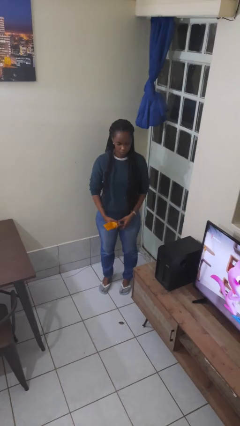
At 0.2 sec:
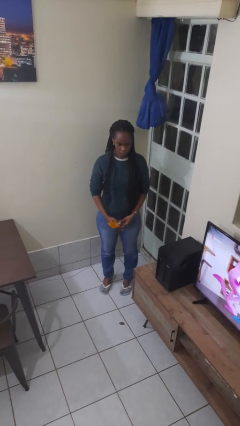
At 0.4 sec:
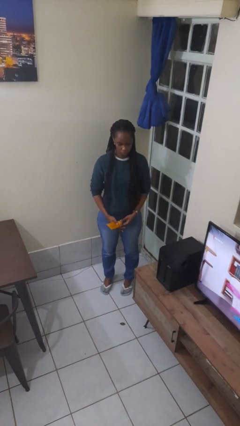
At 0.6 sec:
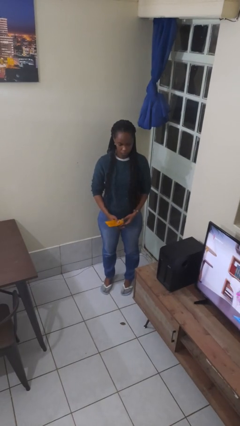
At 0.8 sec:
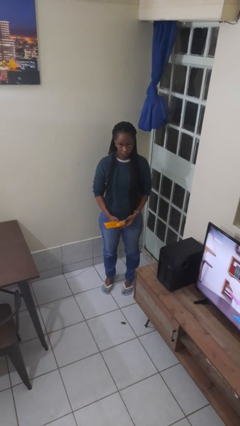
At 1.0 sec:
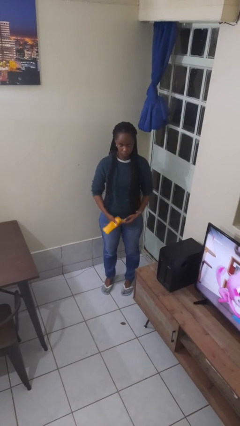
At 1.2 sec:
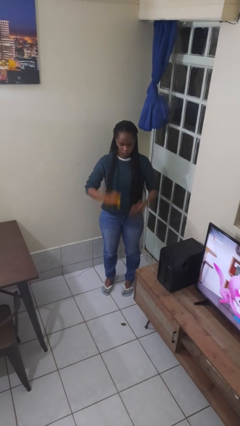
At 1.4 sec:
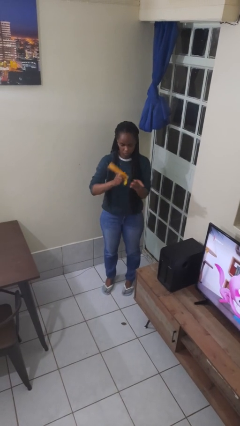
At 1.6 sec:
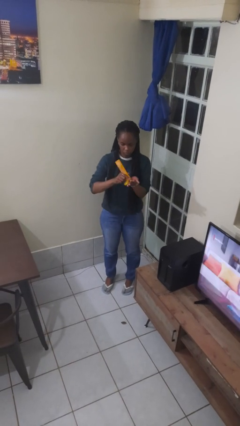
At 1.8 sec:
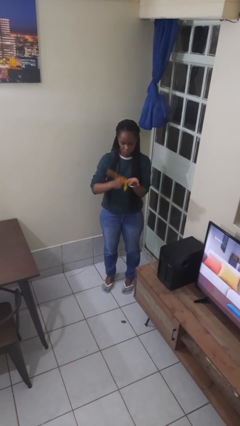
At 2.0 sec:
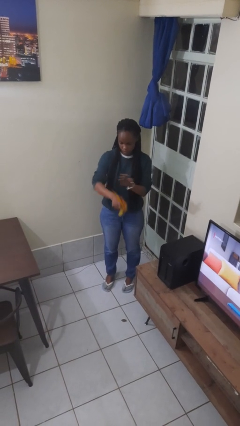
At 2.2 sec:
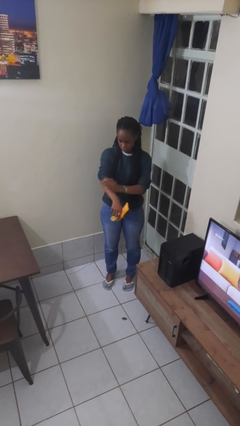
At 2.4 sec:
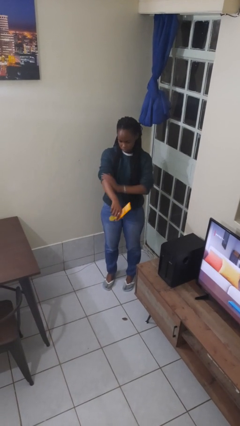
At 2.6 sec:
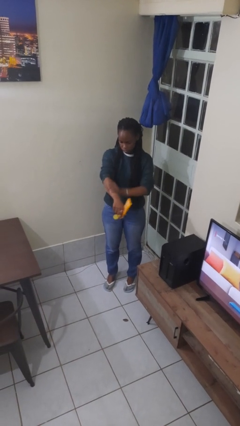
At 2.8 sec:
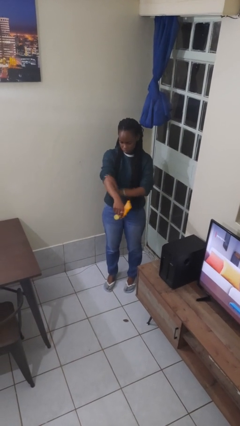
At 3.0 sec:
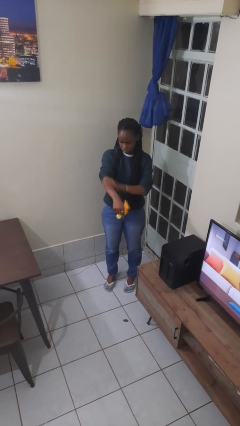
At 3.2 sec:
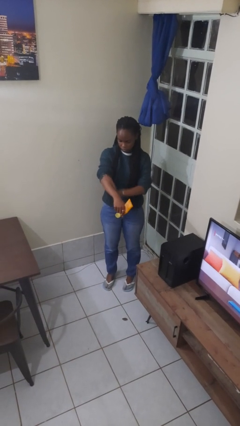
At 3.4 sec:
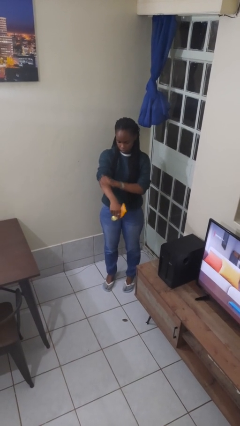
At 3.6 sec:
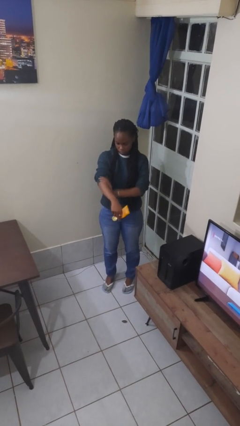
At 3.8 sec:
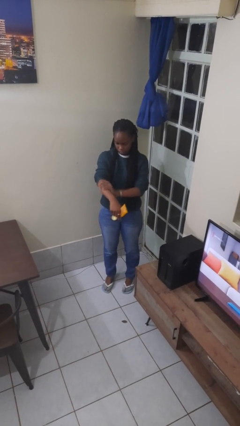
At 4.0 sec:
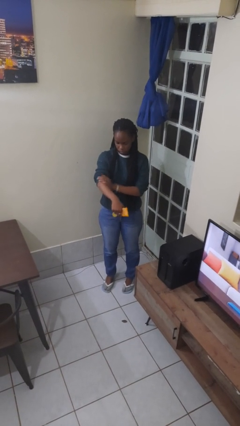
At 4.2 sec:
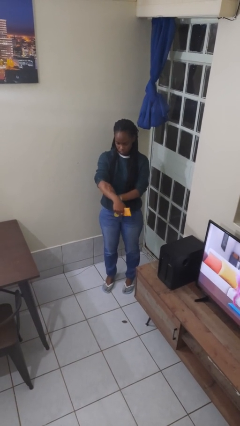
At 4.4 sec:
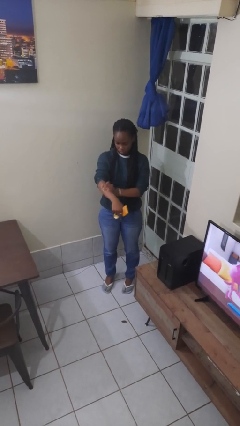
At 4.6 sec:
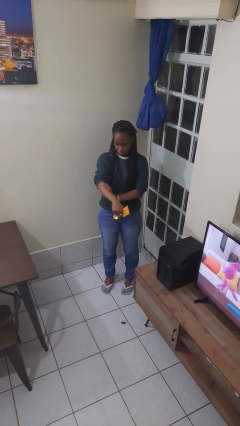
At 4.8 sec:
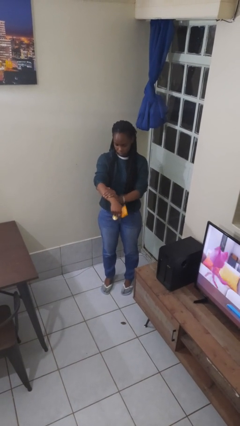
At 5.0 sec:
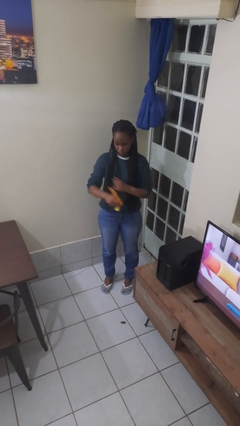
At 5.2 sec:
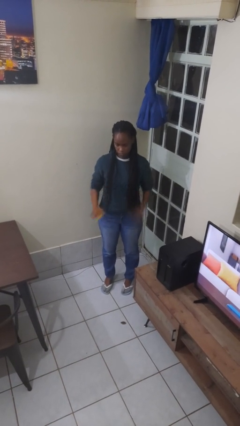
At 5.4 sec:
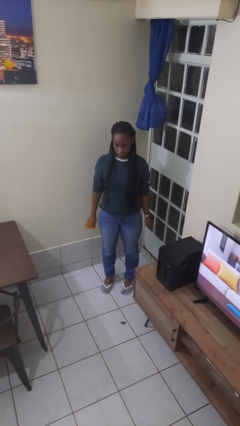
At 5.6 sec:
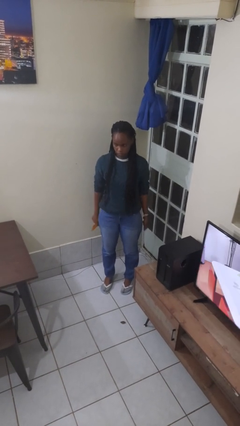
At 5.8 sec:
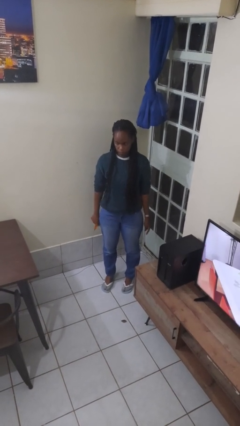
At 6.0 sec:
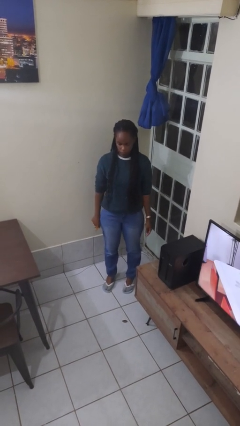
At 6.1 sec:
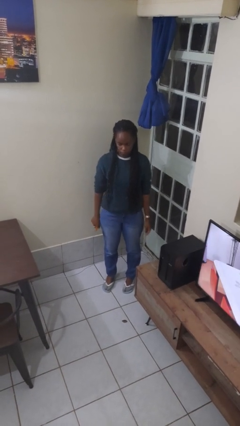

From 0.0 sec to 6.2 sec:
person applies sunscreen

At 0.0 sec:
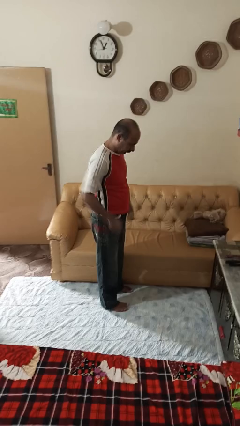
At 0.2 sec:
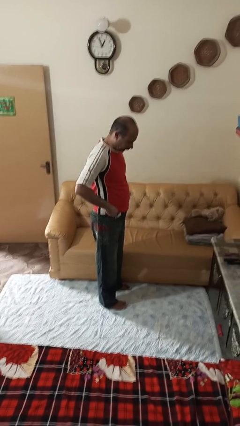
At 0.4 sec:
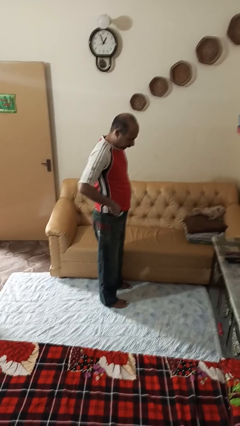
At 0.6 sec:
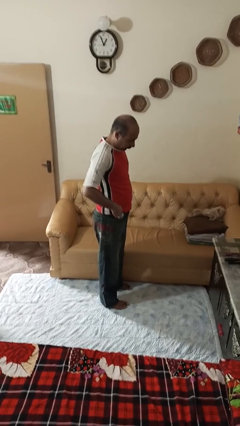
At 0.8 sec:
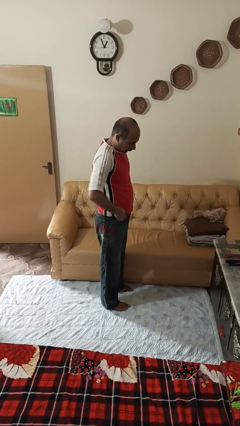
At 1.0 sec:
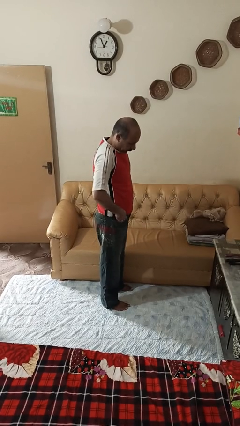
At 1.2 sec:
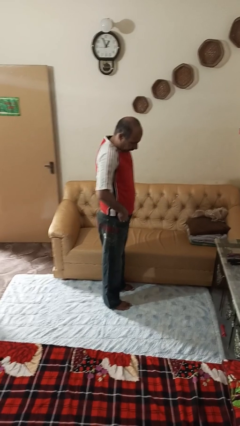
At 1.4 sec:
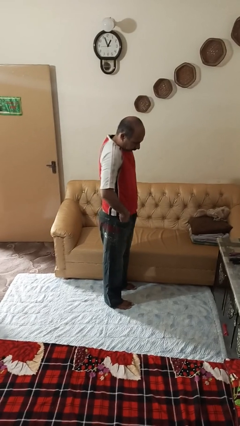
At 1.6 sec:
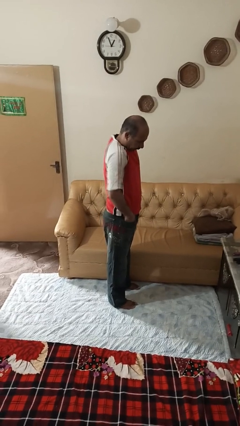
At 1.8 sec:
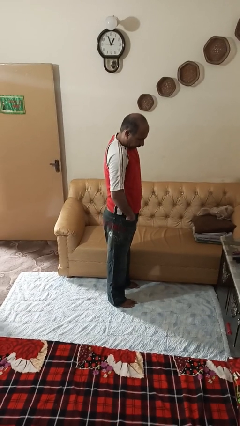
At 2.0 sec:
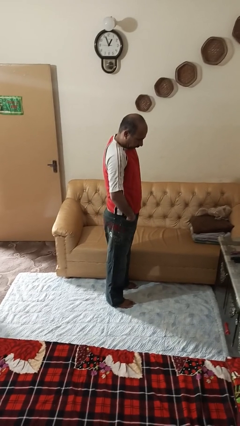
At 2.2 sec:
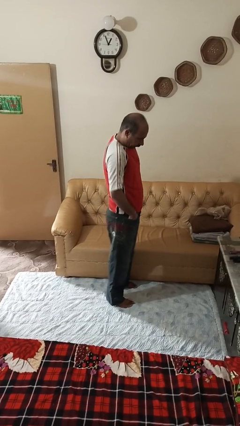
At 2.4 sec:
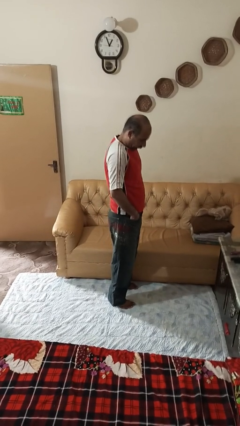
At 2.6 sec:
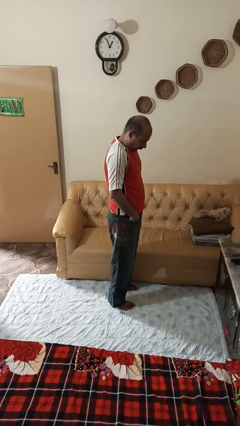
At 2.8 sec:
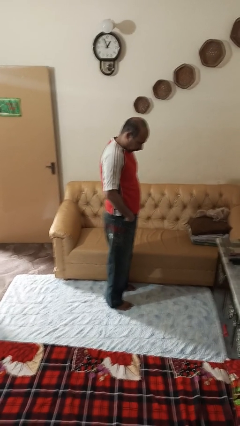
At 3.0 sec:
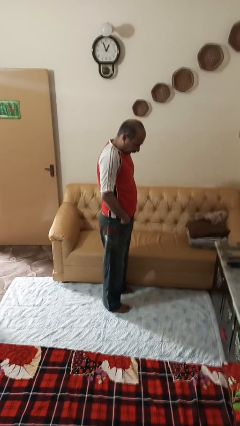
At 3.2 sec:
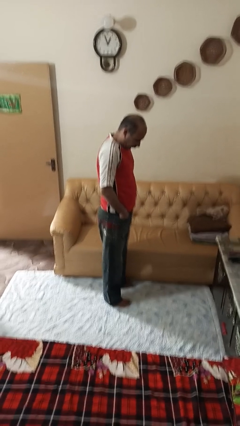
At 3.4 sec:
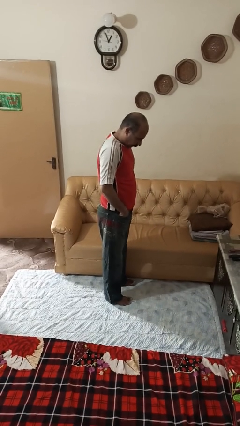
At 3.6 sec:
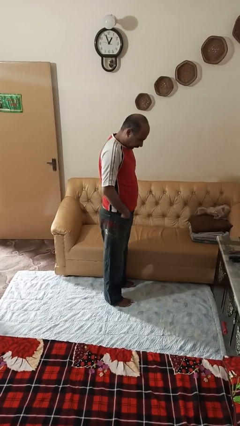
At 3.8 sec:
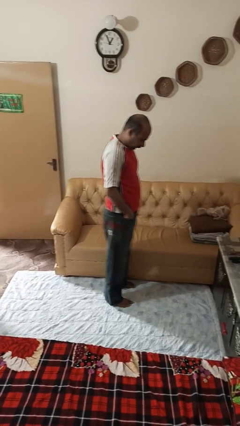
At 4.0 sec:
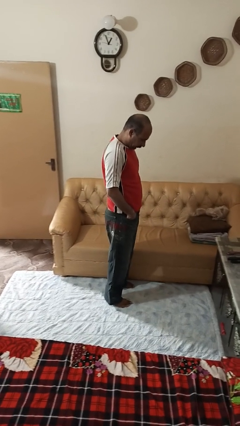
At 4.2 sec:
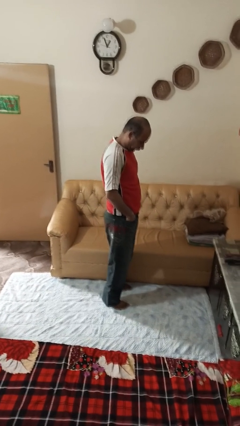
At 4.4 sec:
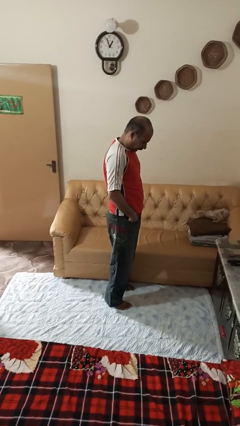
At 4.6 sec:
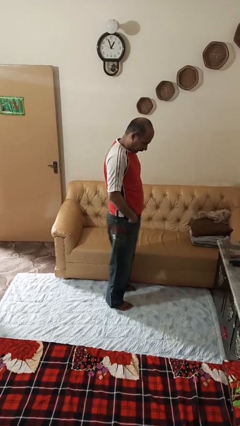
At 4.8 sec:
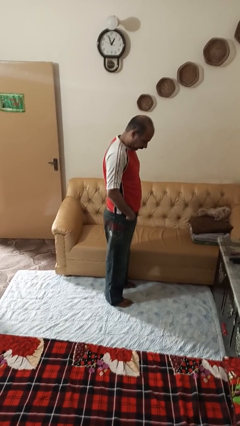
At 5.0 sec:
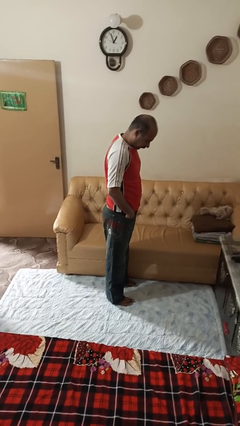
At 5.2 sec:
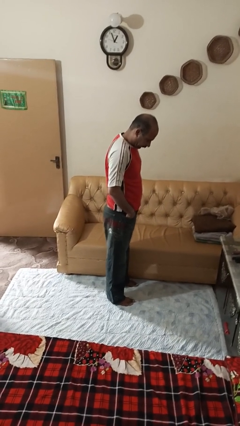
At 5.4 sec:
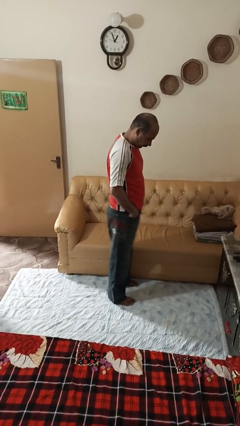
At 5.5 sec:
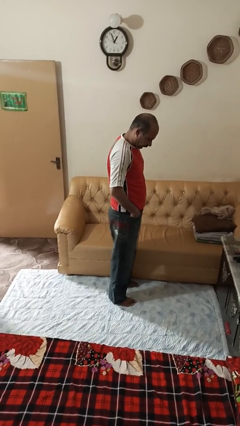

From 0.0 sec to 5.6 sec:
person puts hands in back pockets

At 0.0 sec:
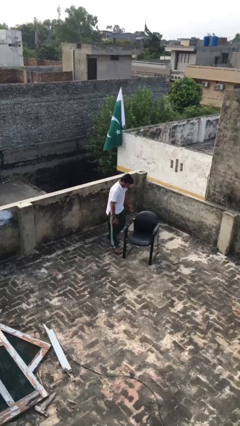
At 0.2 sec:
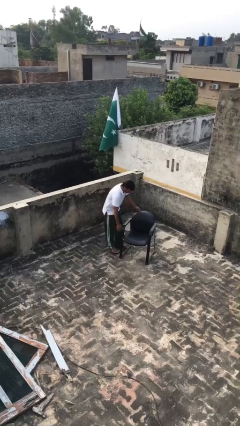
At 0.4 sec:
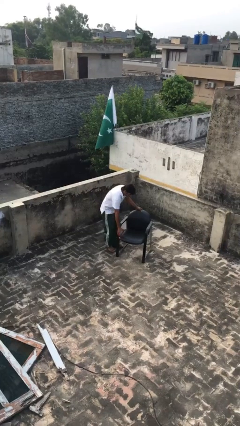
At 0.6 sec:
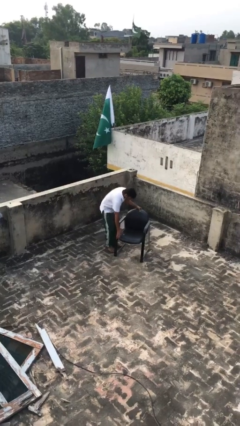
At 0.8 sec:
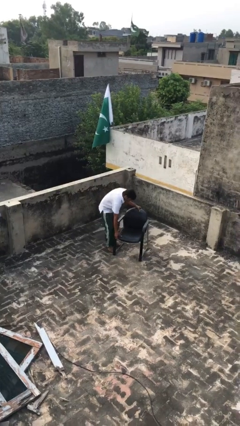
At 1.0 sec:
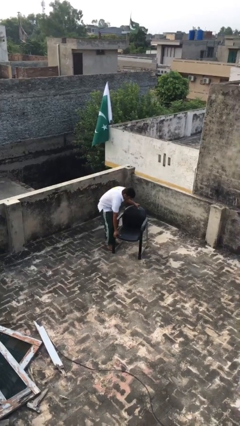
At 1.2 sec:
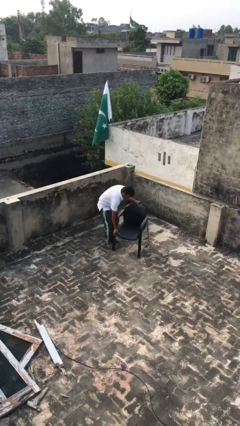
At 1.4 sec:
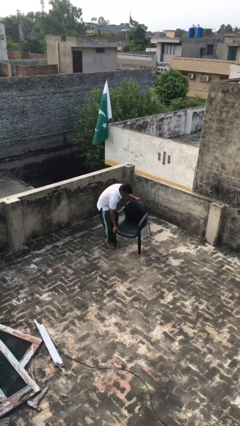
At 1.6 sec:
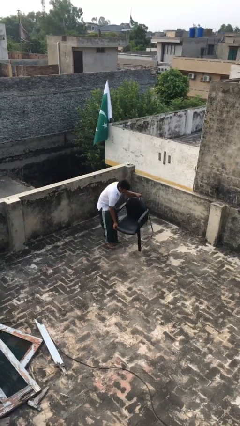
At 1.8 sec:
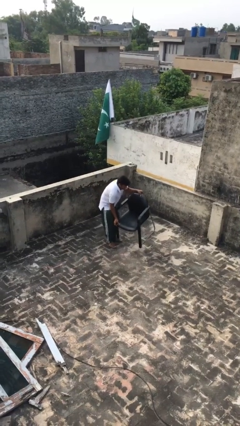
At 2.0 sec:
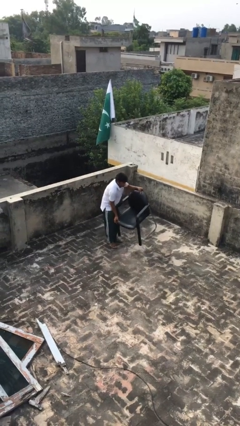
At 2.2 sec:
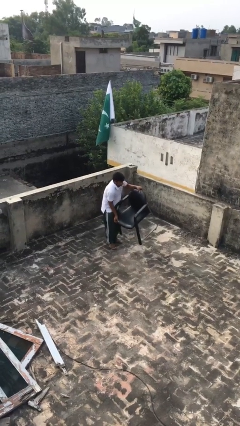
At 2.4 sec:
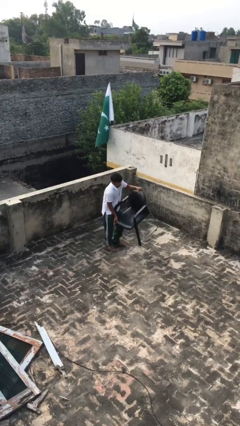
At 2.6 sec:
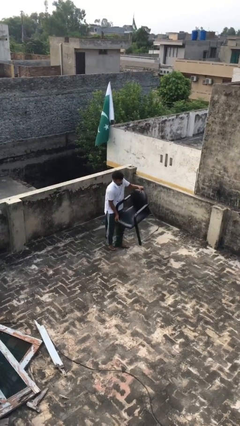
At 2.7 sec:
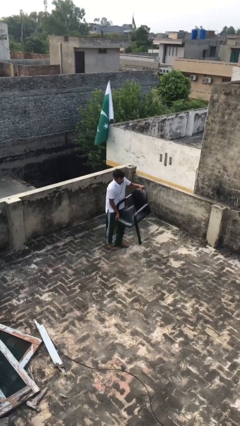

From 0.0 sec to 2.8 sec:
person picks up object from floor

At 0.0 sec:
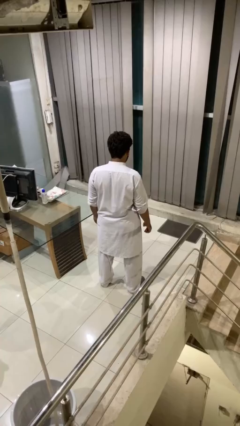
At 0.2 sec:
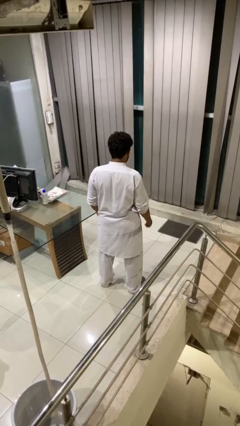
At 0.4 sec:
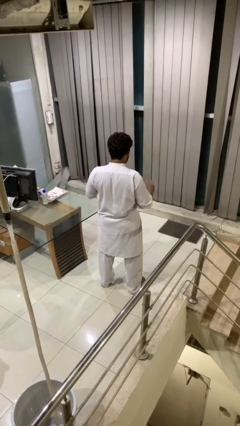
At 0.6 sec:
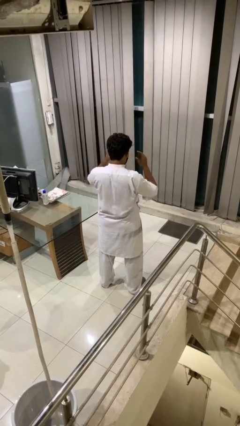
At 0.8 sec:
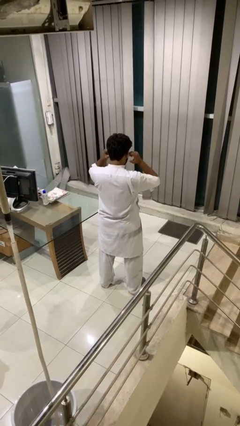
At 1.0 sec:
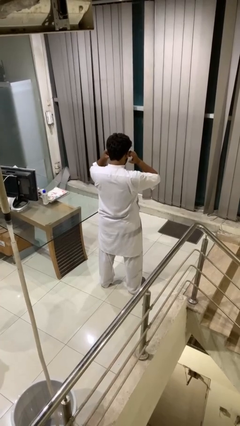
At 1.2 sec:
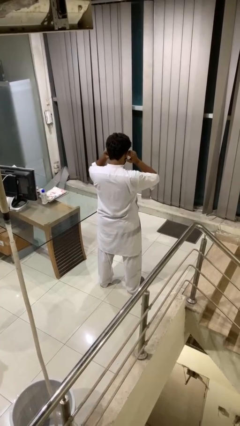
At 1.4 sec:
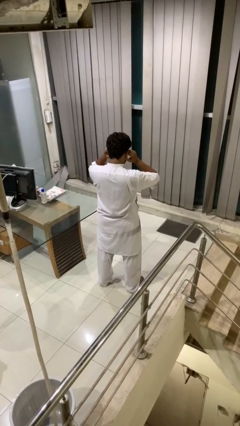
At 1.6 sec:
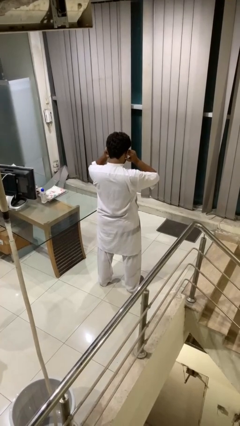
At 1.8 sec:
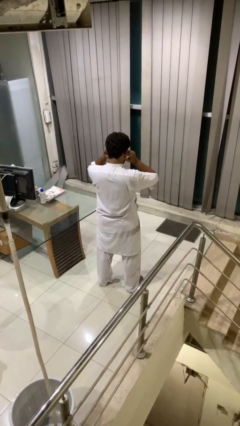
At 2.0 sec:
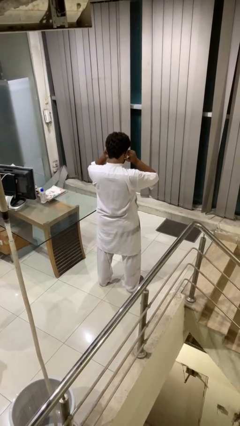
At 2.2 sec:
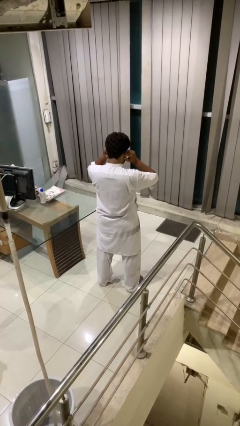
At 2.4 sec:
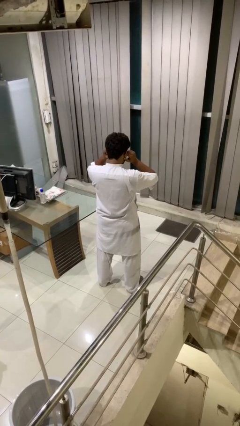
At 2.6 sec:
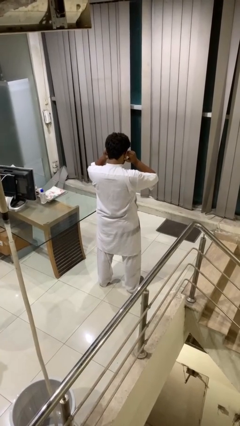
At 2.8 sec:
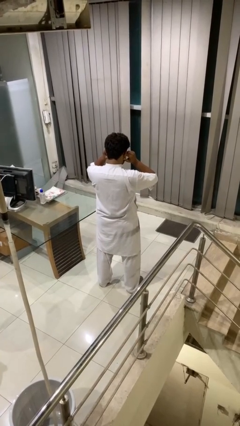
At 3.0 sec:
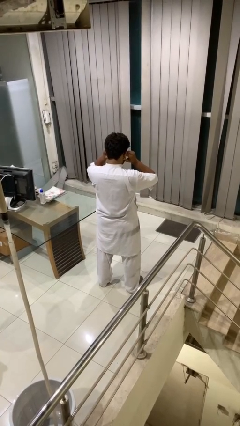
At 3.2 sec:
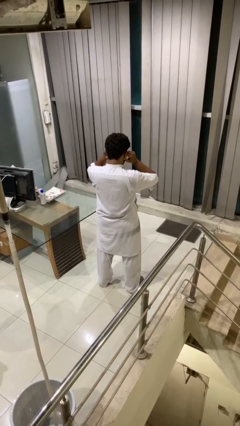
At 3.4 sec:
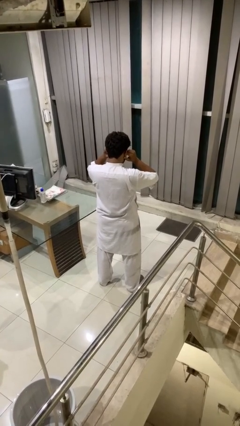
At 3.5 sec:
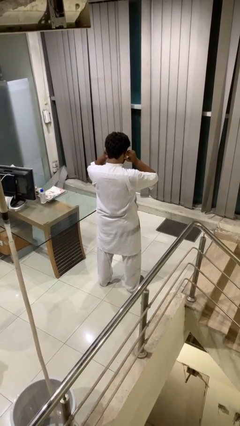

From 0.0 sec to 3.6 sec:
person puts fingers in ear
